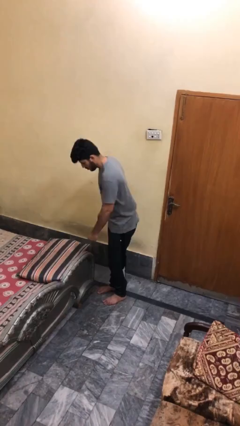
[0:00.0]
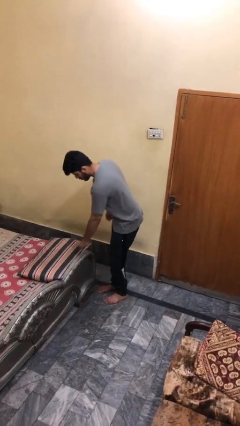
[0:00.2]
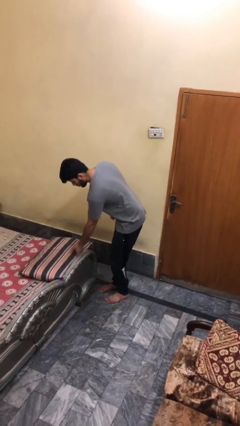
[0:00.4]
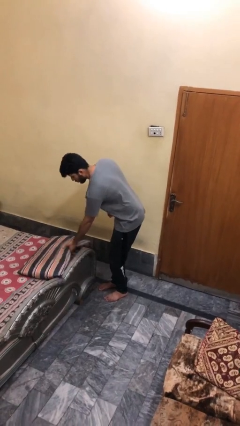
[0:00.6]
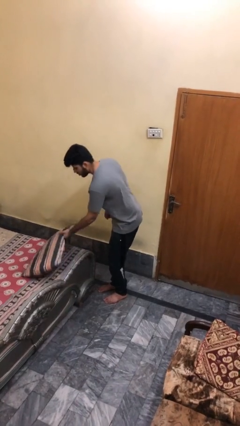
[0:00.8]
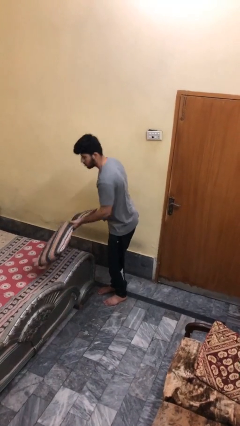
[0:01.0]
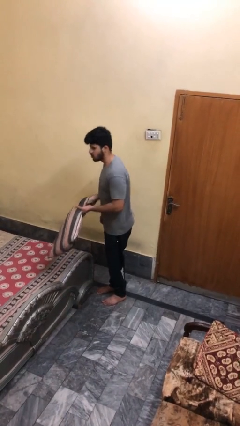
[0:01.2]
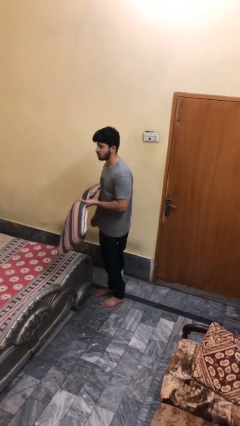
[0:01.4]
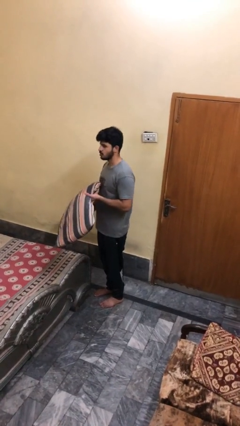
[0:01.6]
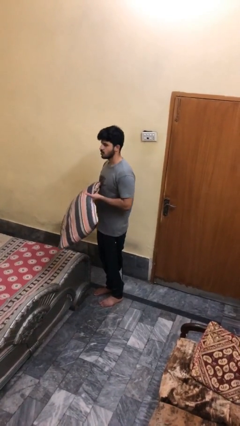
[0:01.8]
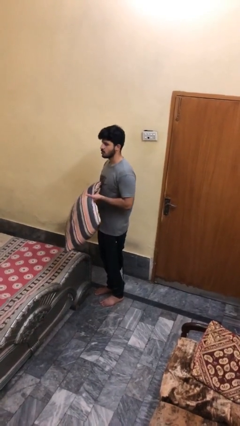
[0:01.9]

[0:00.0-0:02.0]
person picks up object from bed

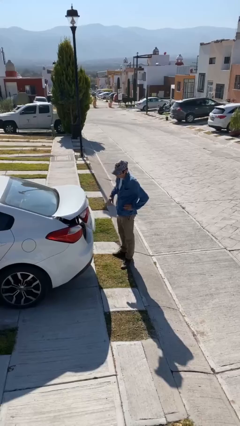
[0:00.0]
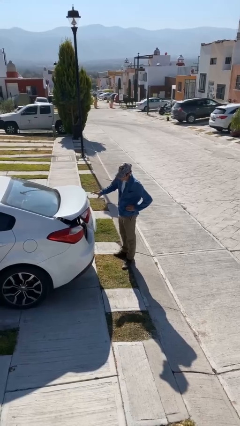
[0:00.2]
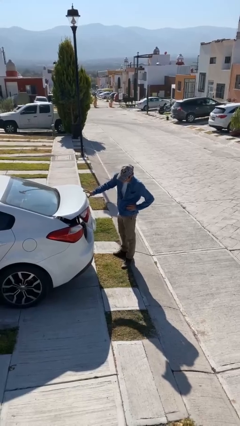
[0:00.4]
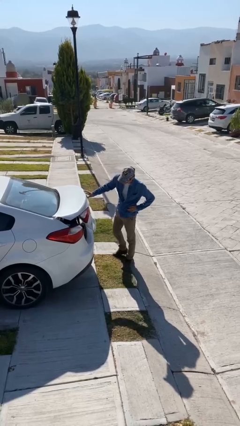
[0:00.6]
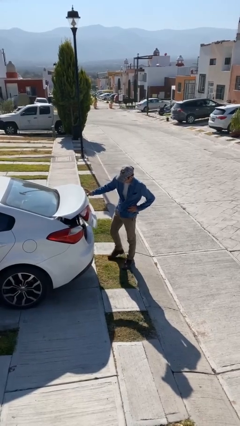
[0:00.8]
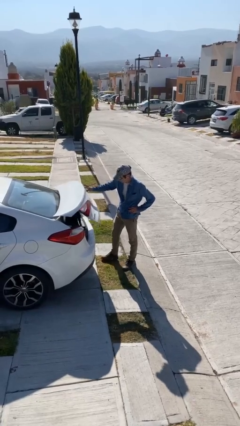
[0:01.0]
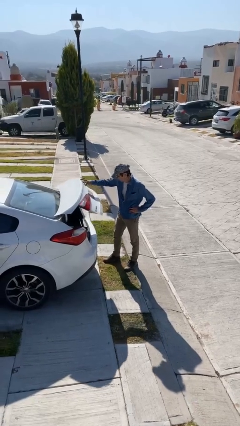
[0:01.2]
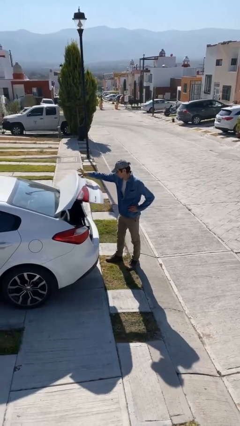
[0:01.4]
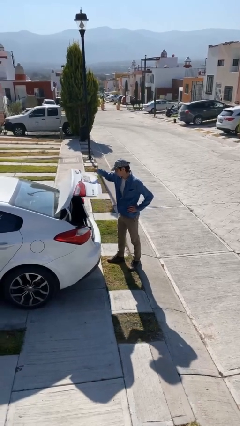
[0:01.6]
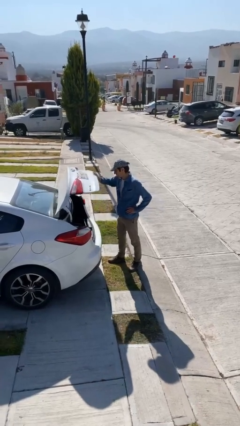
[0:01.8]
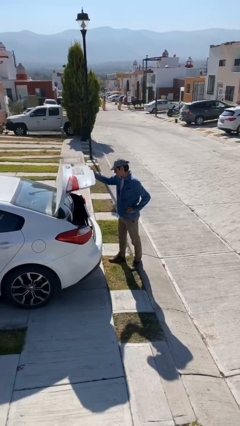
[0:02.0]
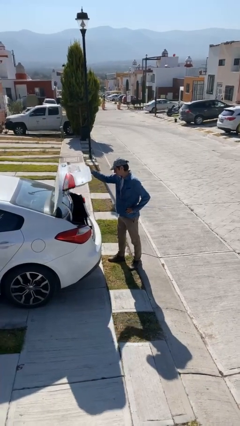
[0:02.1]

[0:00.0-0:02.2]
person opens car trunk

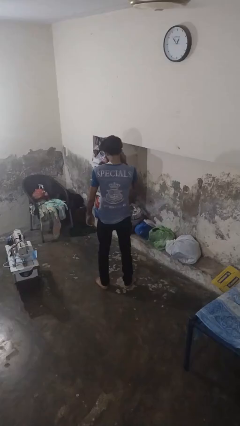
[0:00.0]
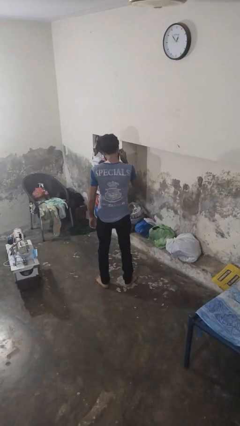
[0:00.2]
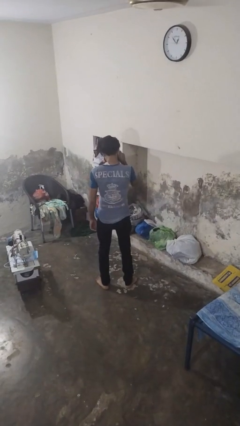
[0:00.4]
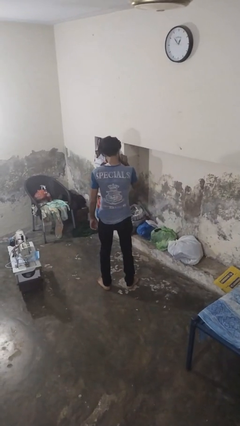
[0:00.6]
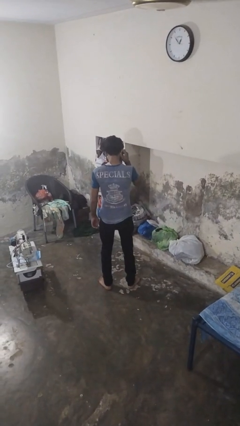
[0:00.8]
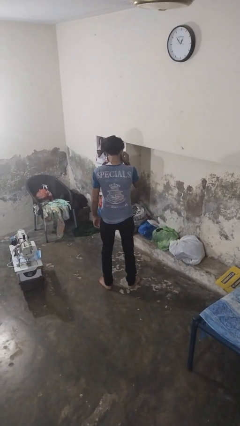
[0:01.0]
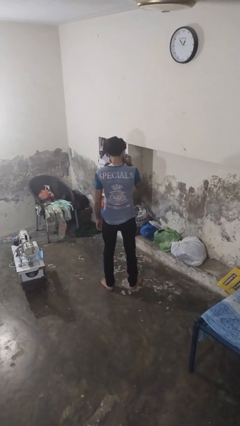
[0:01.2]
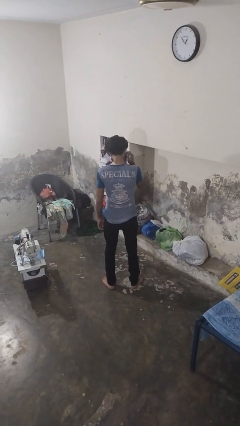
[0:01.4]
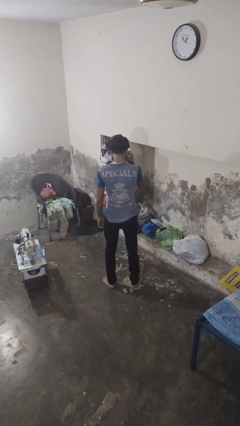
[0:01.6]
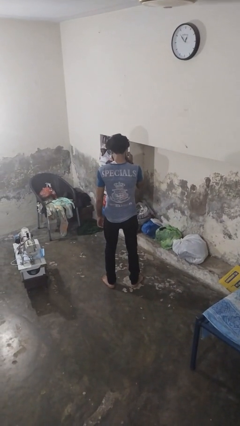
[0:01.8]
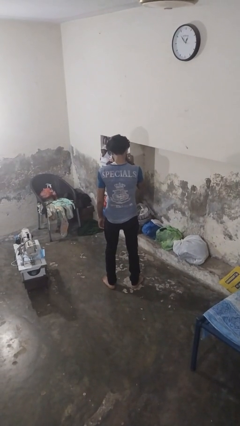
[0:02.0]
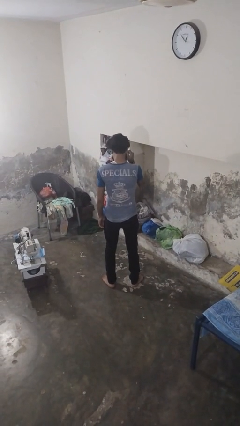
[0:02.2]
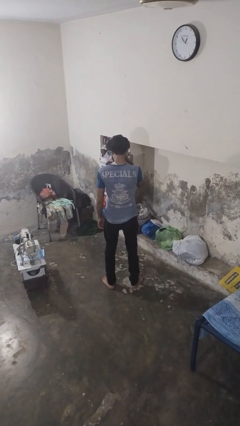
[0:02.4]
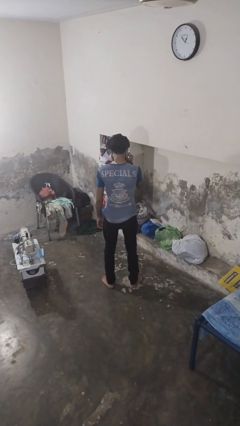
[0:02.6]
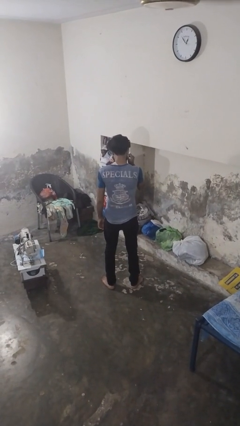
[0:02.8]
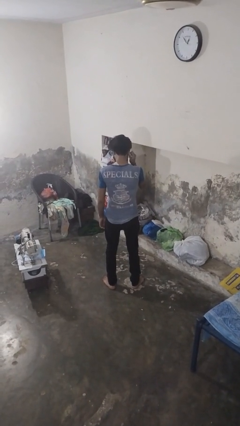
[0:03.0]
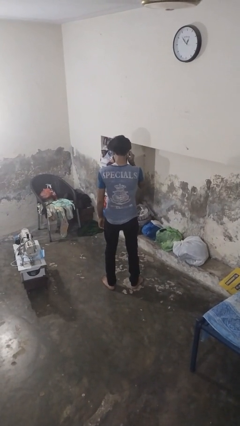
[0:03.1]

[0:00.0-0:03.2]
person touches earlobe

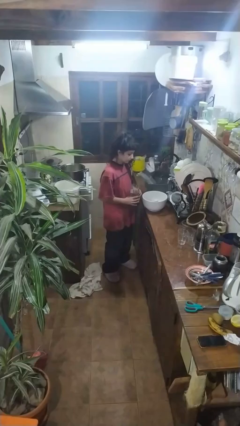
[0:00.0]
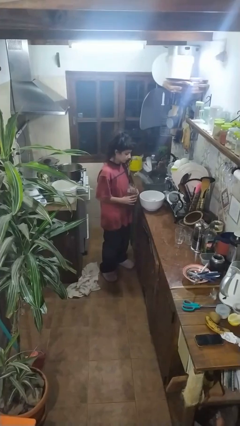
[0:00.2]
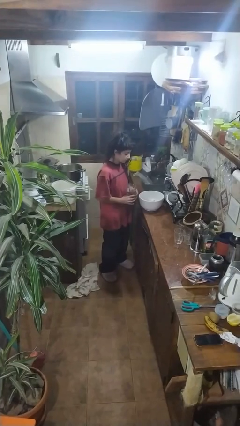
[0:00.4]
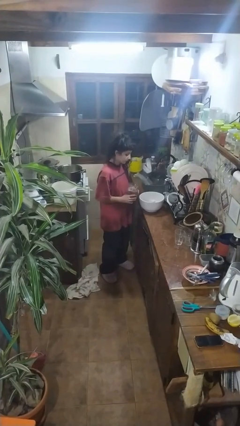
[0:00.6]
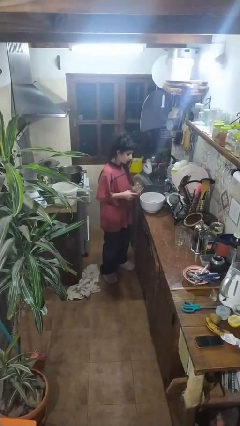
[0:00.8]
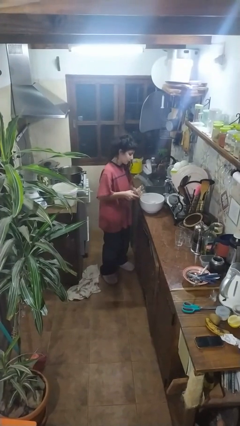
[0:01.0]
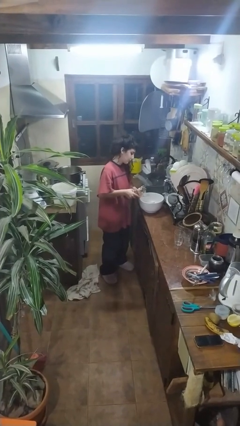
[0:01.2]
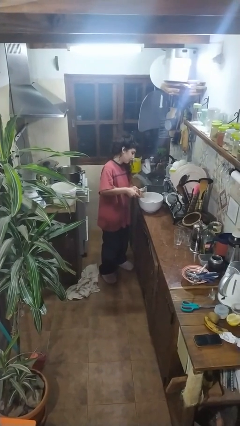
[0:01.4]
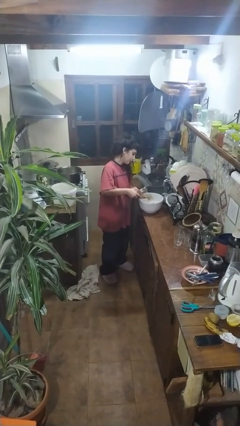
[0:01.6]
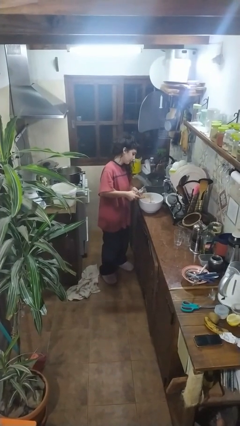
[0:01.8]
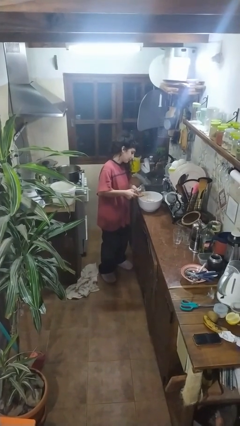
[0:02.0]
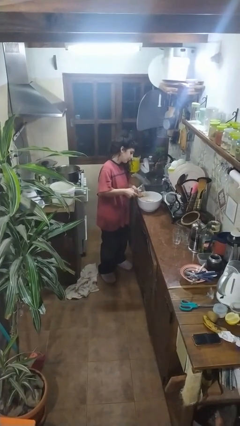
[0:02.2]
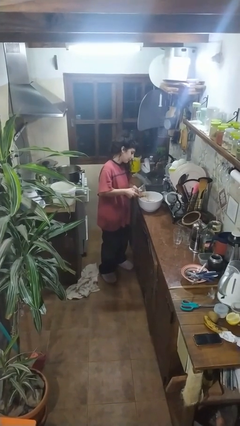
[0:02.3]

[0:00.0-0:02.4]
person pours into bowl

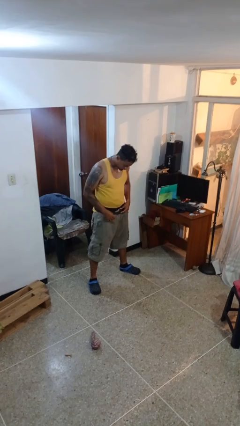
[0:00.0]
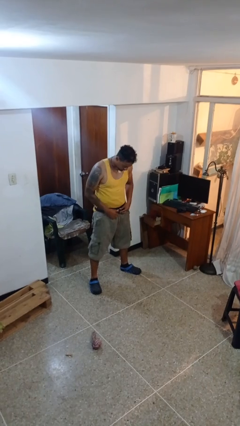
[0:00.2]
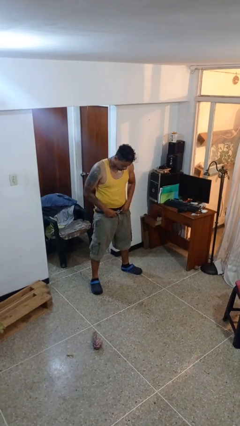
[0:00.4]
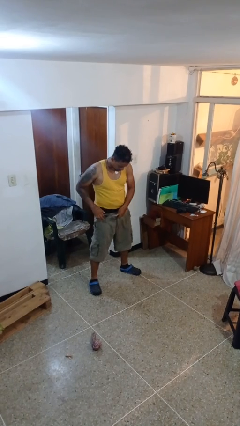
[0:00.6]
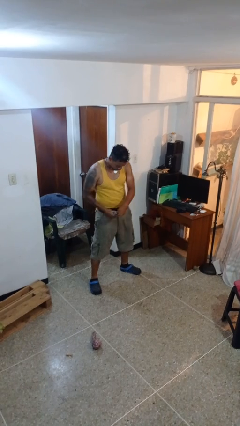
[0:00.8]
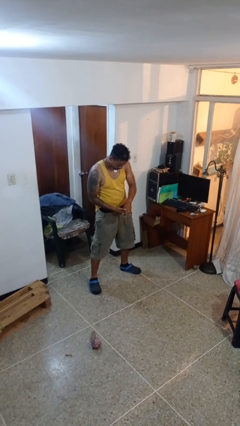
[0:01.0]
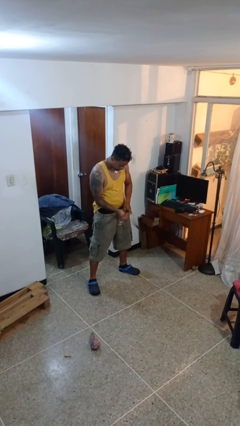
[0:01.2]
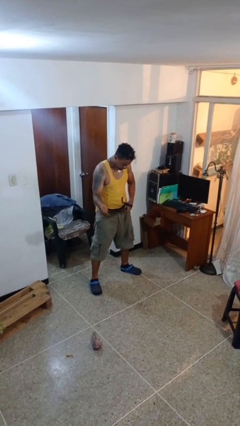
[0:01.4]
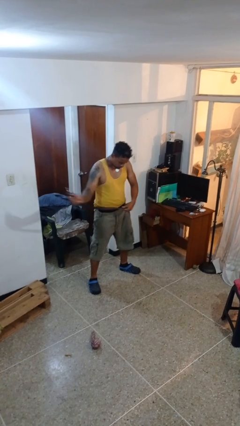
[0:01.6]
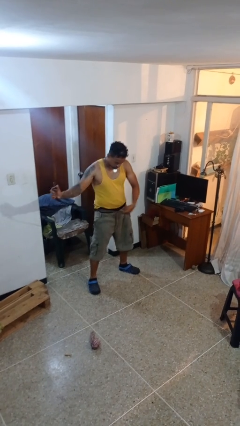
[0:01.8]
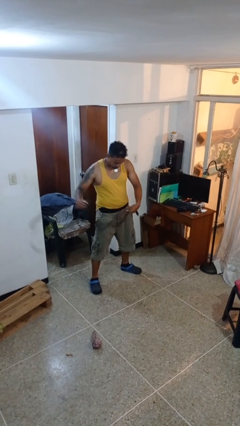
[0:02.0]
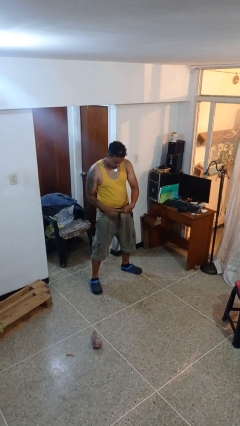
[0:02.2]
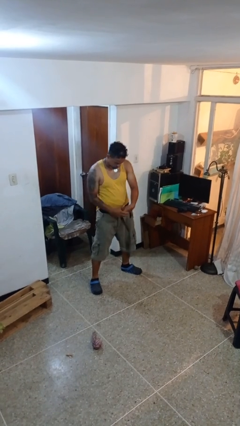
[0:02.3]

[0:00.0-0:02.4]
person takes off belt

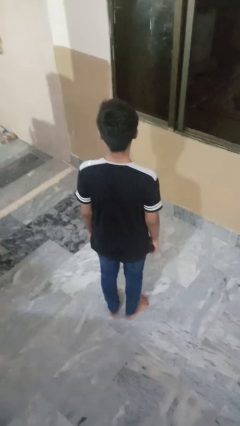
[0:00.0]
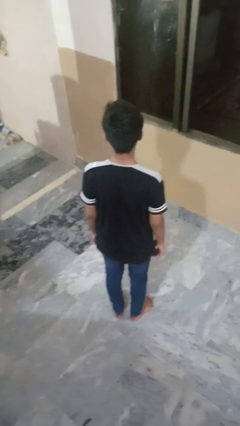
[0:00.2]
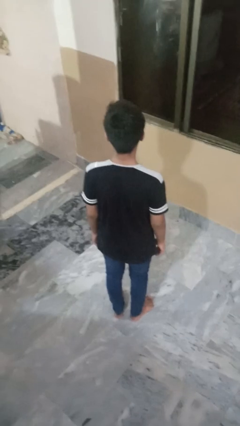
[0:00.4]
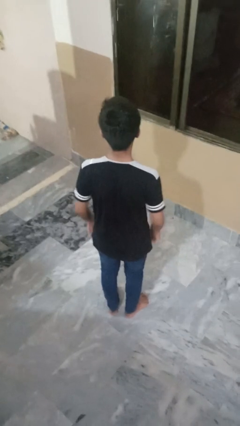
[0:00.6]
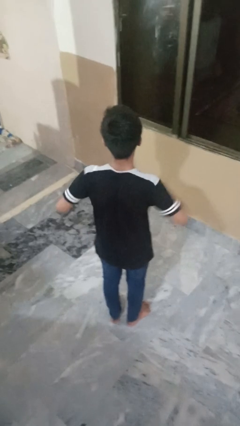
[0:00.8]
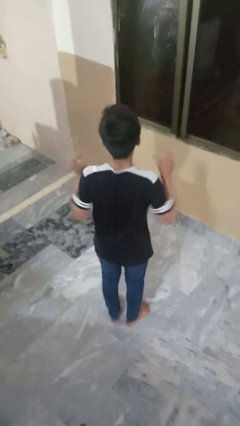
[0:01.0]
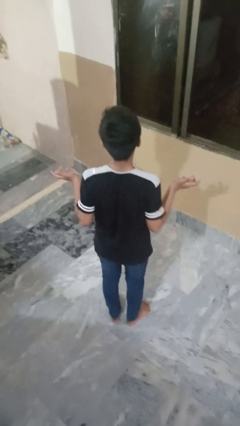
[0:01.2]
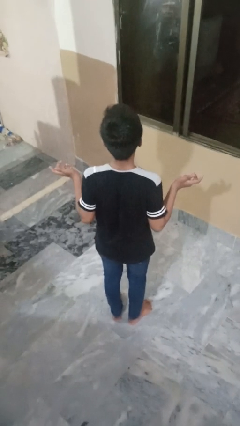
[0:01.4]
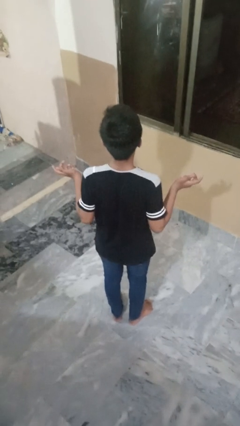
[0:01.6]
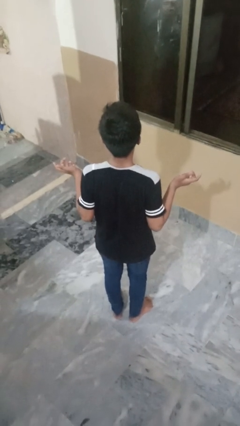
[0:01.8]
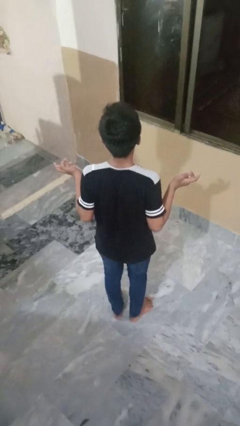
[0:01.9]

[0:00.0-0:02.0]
person shrugs

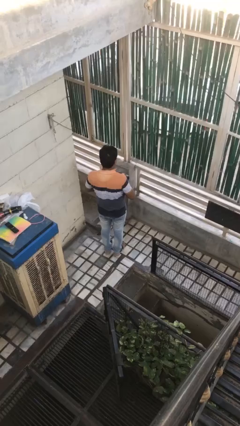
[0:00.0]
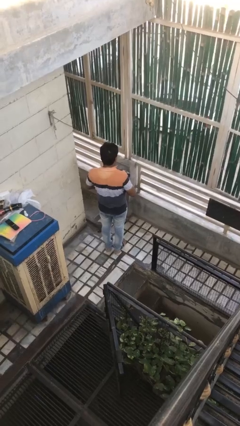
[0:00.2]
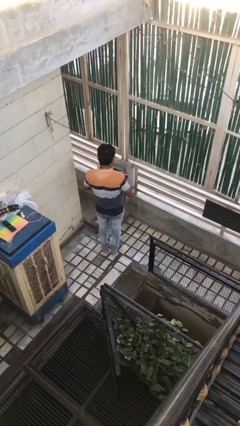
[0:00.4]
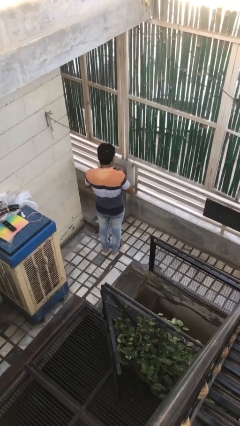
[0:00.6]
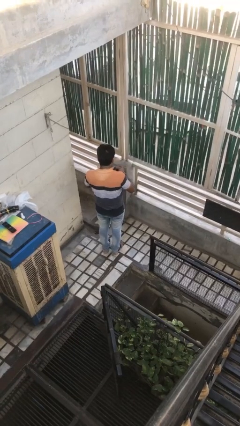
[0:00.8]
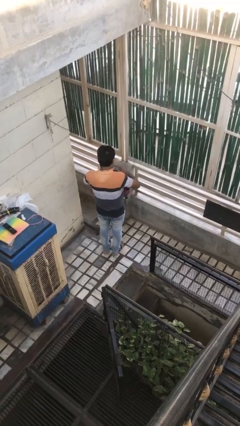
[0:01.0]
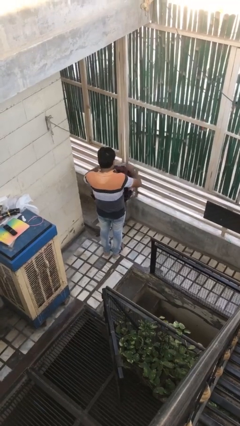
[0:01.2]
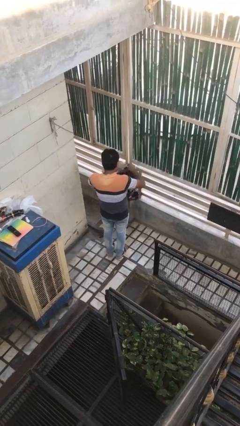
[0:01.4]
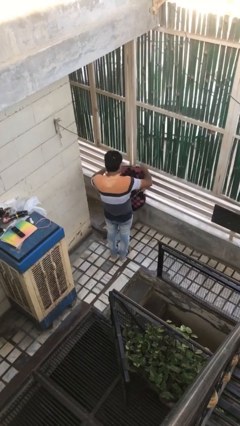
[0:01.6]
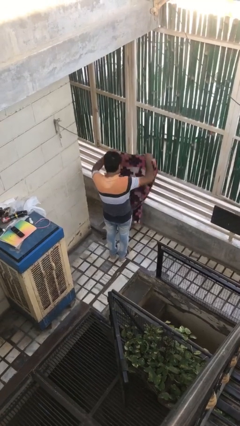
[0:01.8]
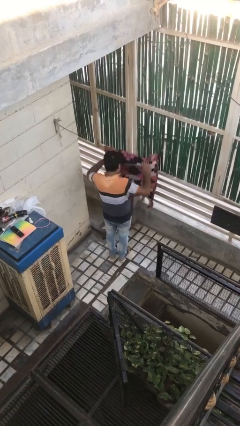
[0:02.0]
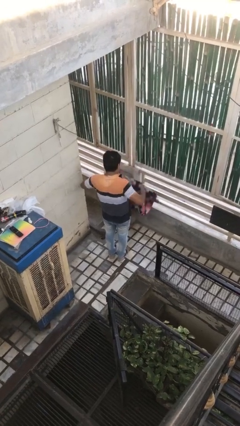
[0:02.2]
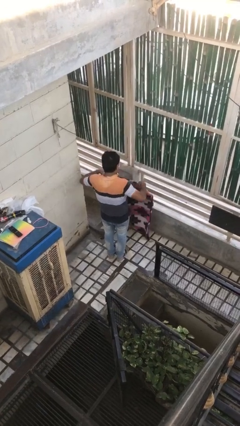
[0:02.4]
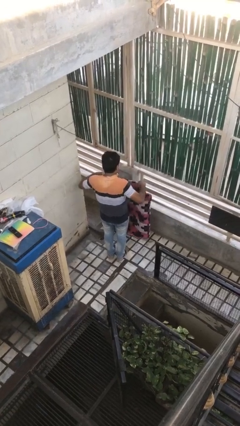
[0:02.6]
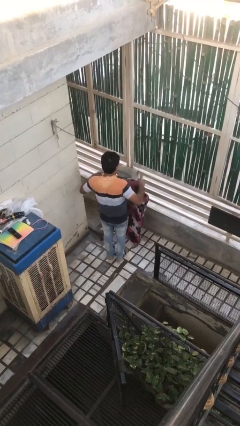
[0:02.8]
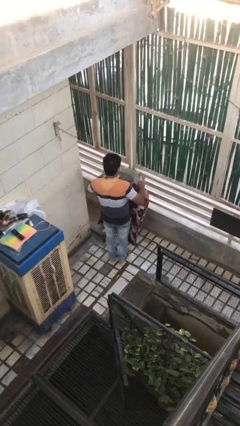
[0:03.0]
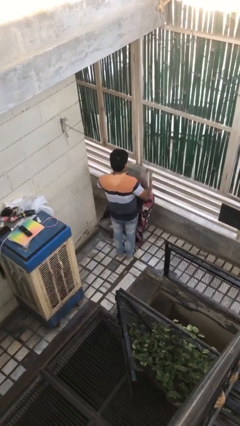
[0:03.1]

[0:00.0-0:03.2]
person unfolds blanket
